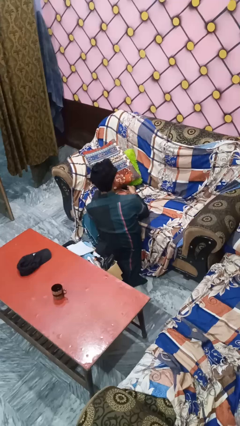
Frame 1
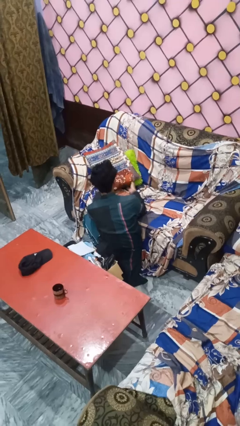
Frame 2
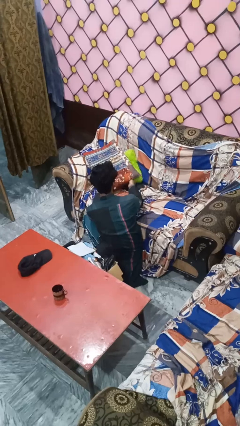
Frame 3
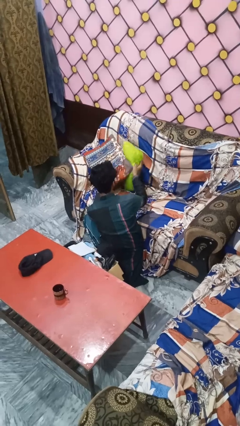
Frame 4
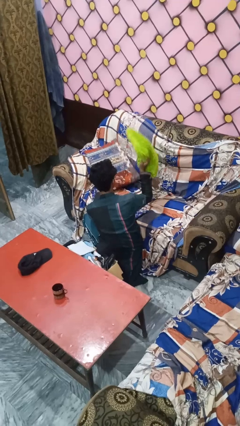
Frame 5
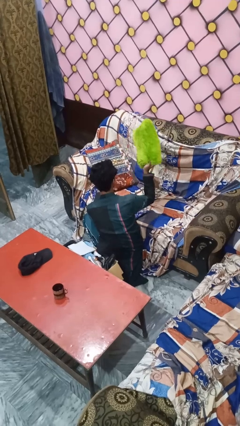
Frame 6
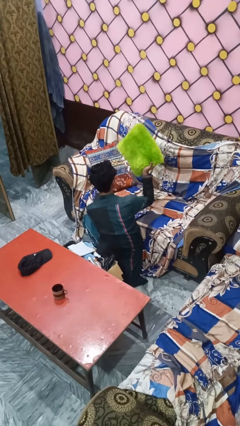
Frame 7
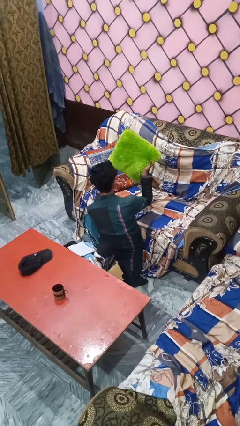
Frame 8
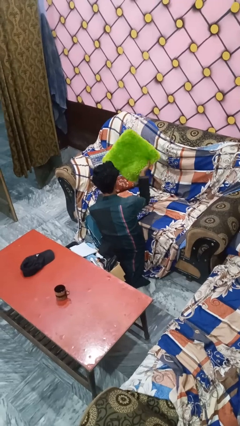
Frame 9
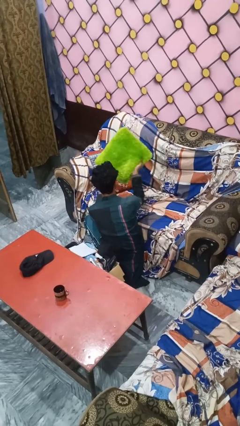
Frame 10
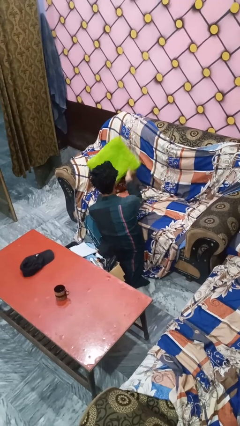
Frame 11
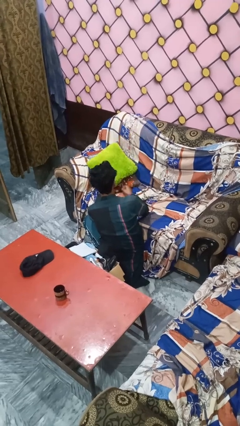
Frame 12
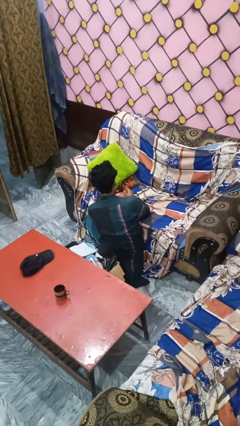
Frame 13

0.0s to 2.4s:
person searches in couch

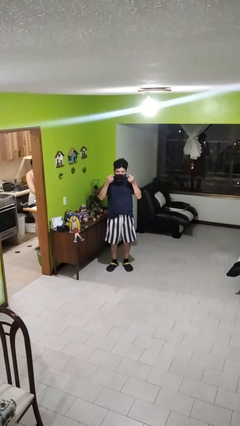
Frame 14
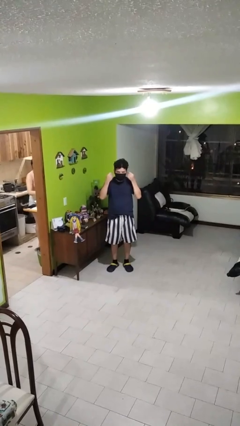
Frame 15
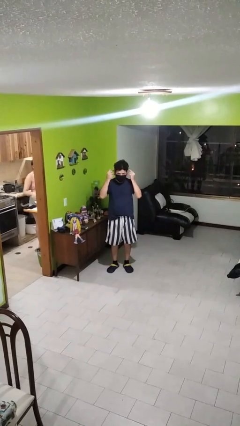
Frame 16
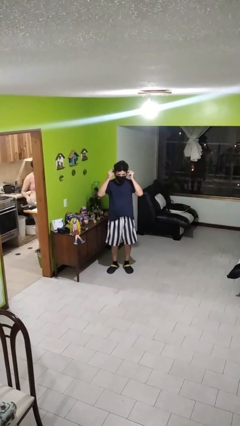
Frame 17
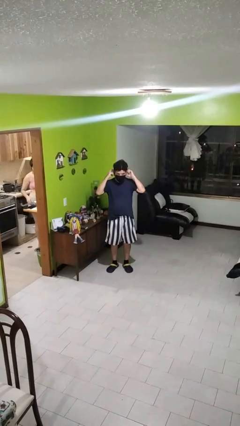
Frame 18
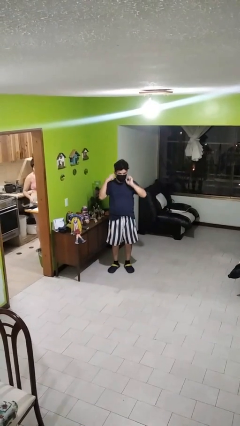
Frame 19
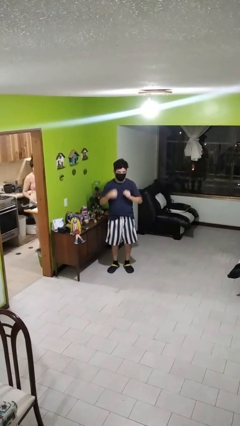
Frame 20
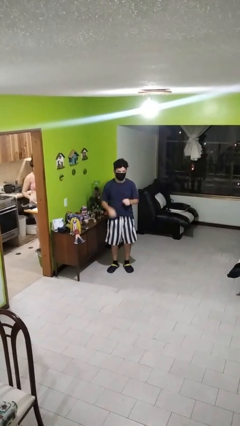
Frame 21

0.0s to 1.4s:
person puts on facemask

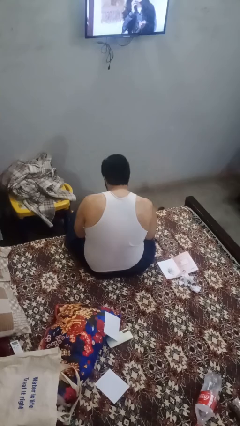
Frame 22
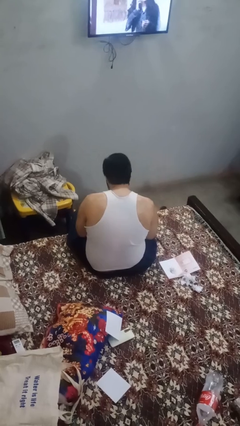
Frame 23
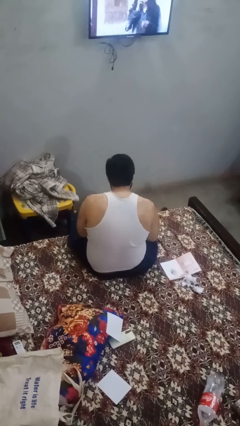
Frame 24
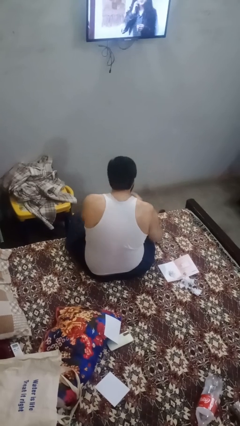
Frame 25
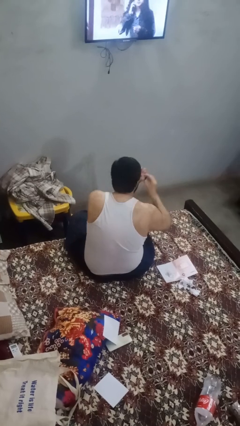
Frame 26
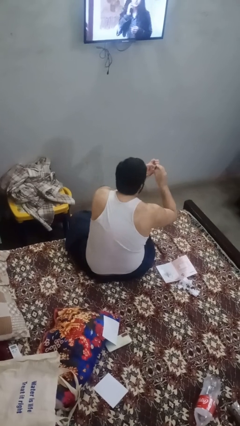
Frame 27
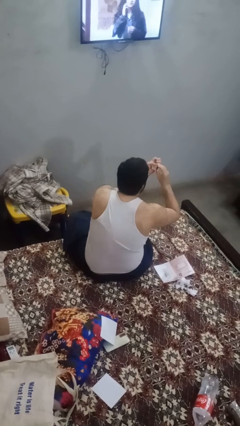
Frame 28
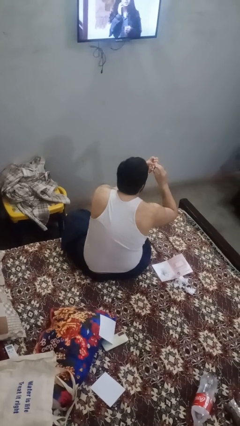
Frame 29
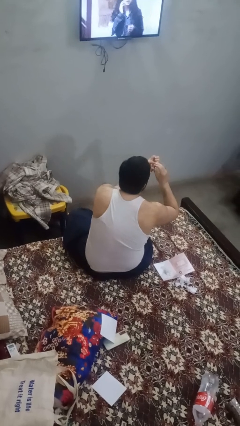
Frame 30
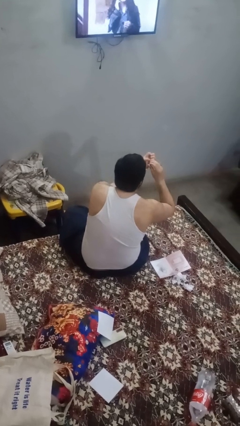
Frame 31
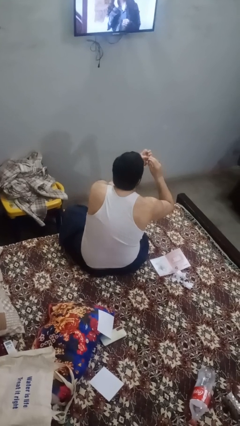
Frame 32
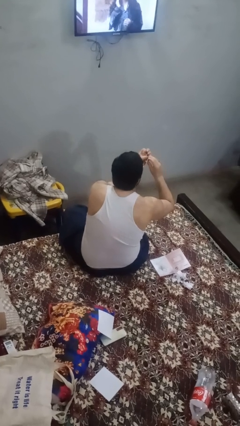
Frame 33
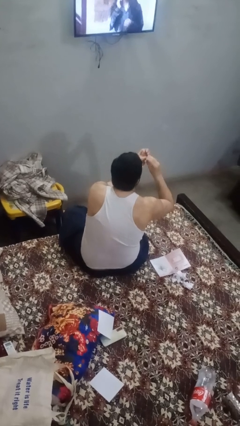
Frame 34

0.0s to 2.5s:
person clips fingernails

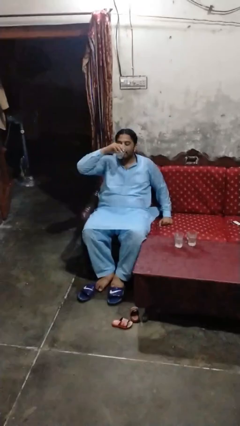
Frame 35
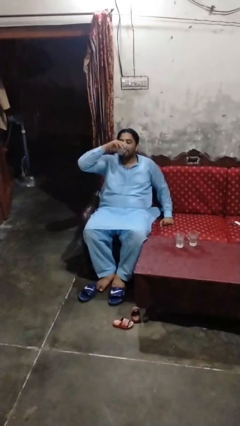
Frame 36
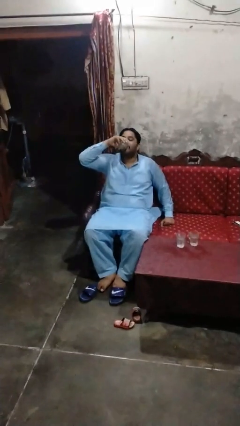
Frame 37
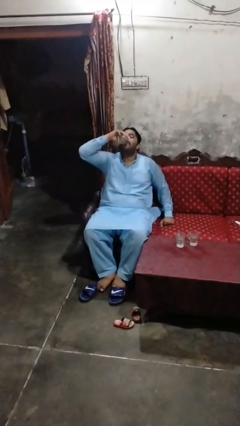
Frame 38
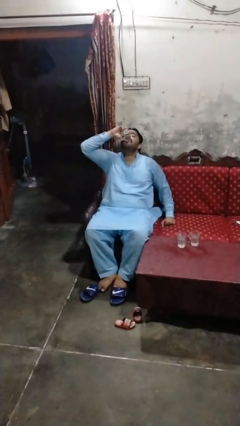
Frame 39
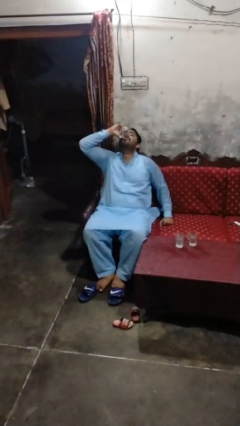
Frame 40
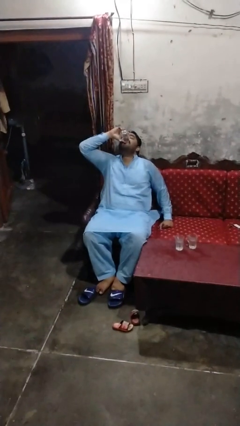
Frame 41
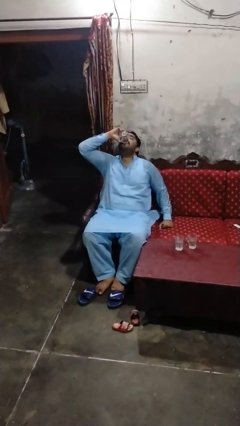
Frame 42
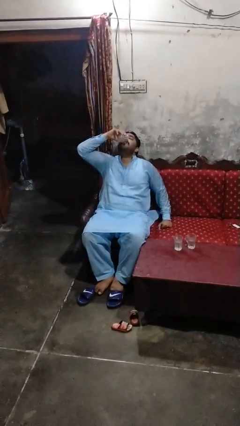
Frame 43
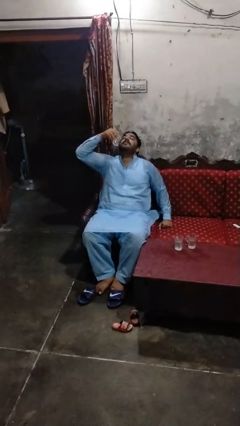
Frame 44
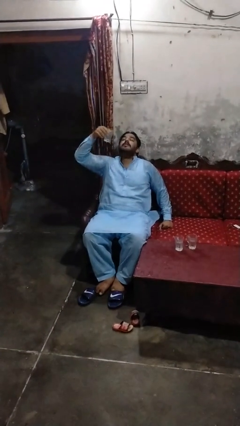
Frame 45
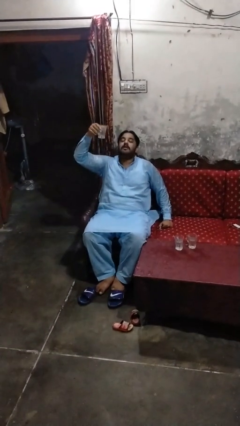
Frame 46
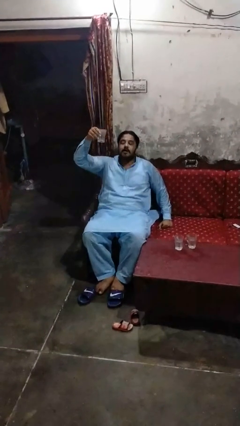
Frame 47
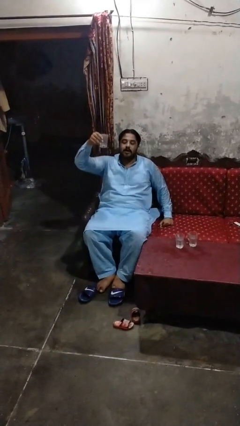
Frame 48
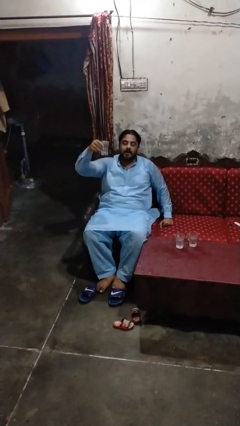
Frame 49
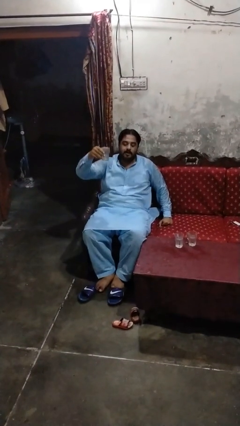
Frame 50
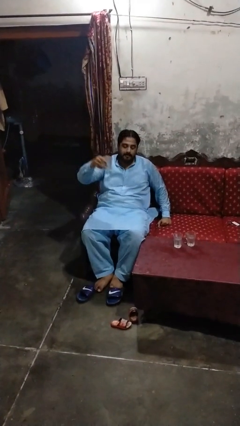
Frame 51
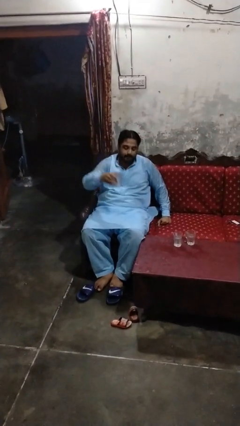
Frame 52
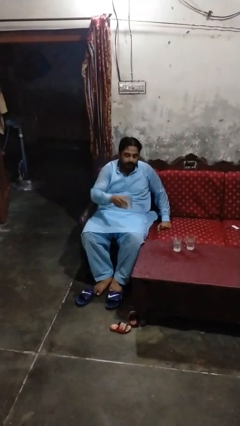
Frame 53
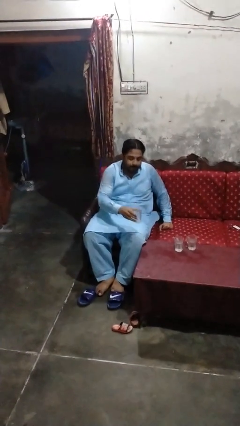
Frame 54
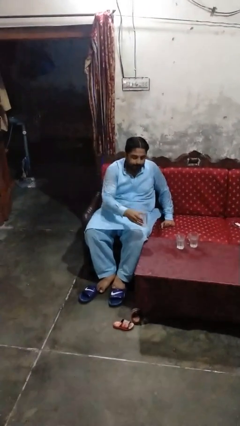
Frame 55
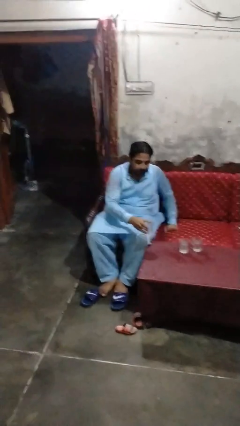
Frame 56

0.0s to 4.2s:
person drinks from shotglass

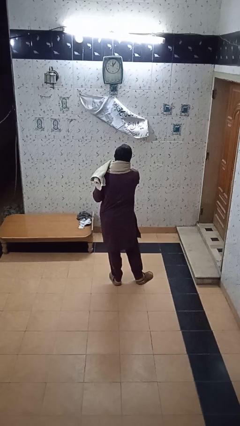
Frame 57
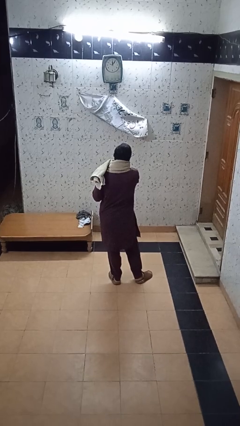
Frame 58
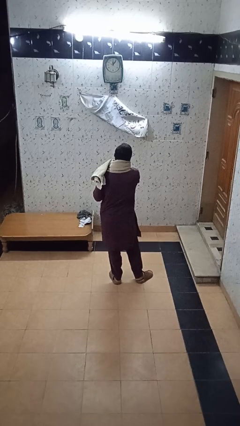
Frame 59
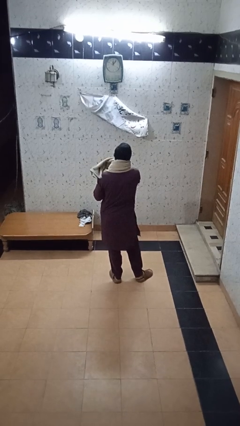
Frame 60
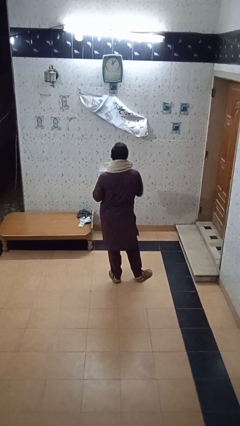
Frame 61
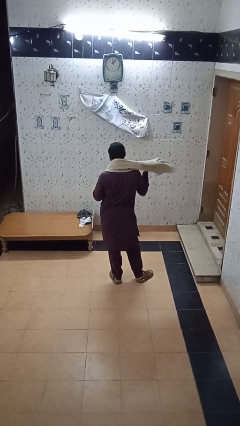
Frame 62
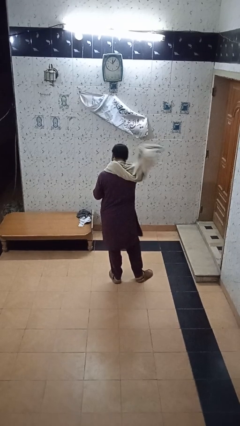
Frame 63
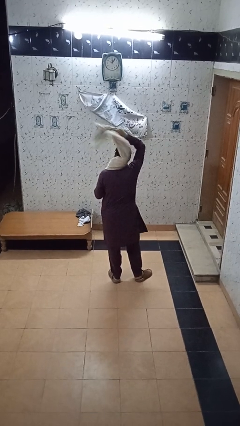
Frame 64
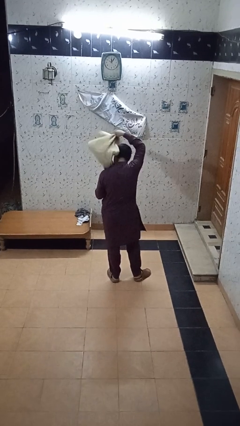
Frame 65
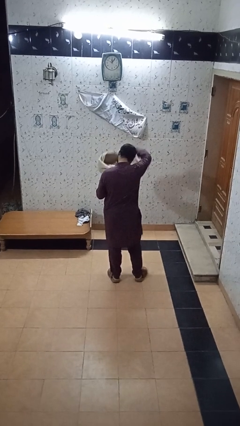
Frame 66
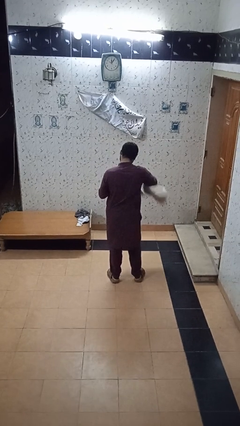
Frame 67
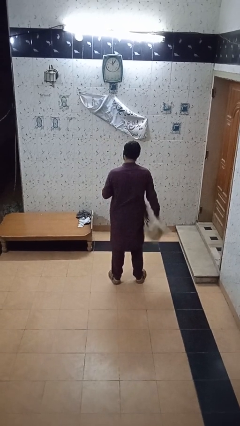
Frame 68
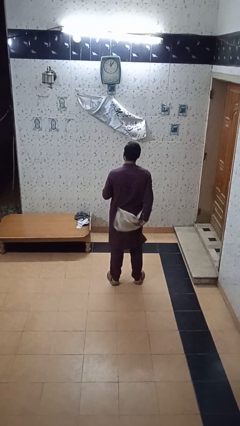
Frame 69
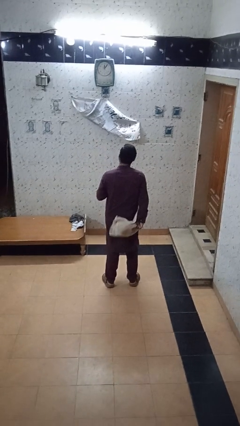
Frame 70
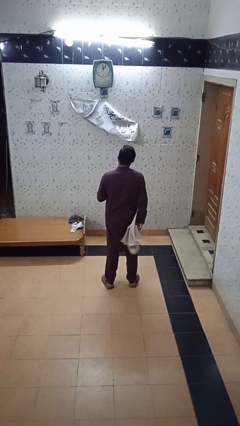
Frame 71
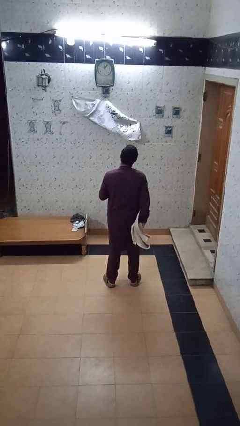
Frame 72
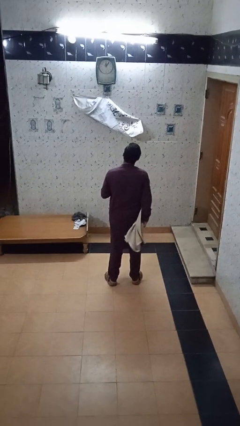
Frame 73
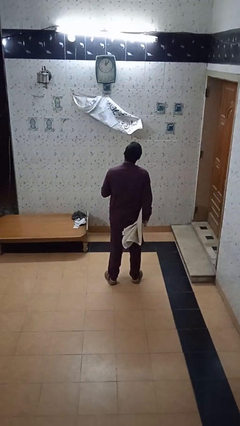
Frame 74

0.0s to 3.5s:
person takes off scarf

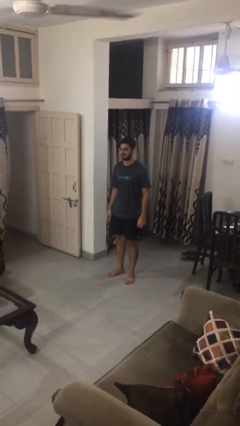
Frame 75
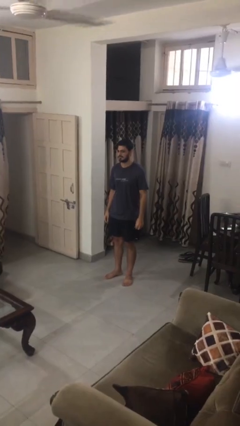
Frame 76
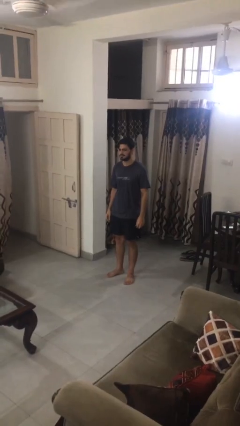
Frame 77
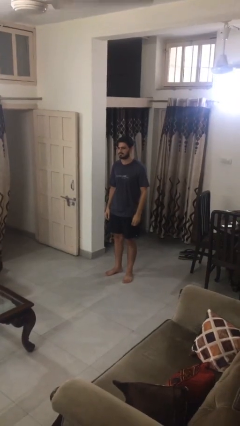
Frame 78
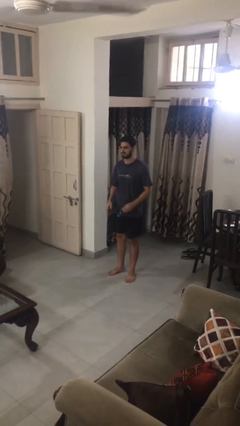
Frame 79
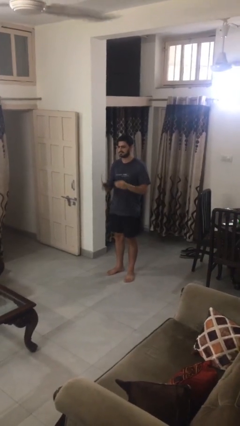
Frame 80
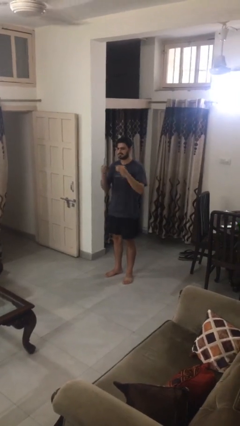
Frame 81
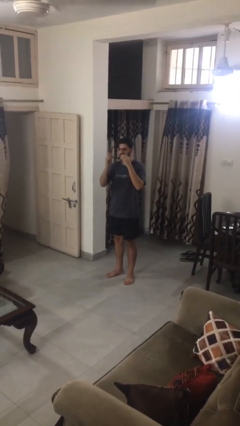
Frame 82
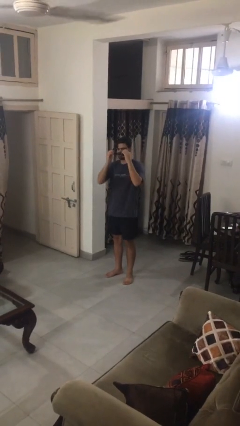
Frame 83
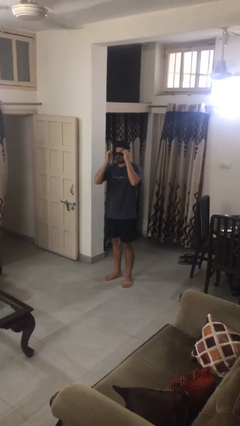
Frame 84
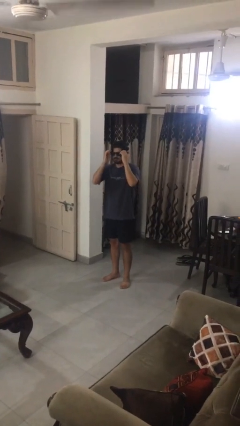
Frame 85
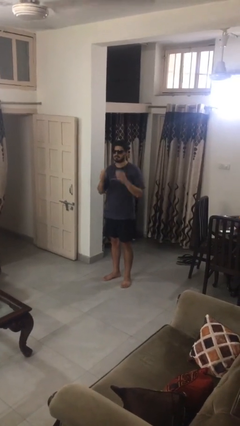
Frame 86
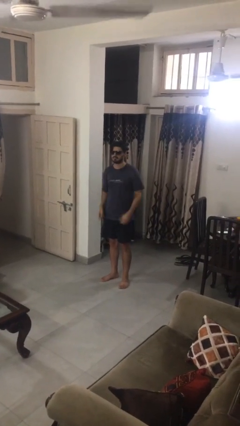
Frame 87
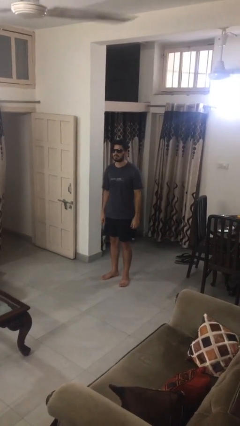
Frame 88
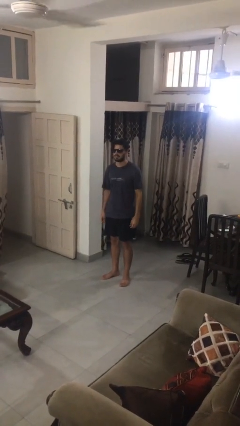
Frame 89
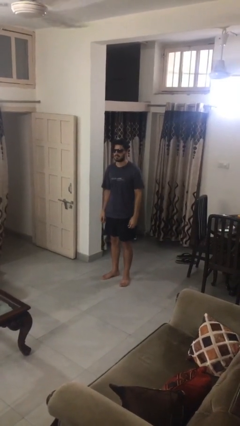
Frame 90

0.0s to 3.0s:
person puts on sunglasses

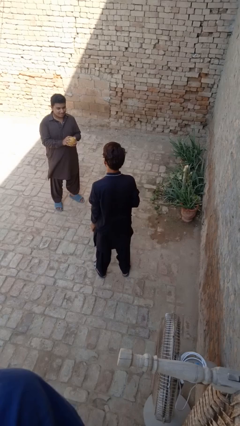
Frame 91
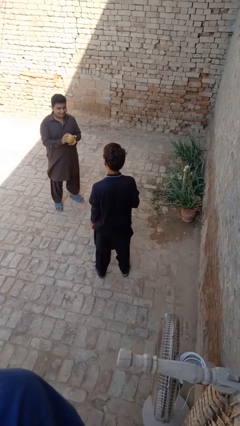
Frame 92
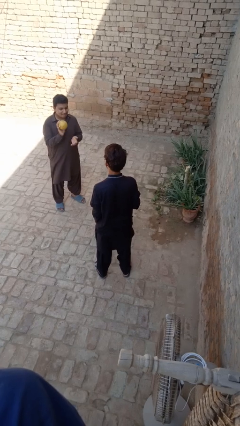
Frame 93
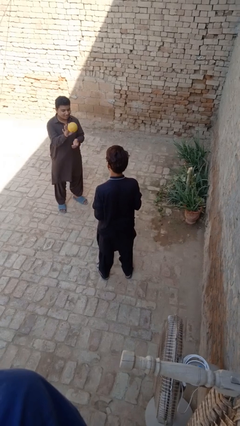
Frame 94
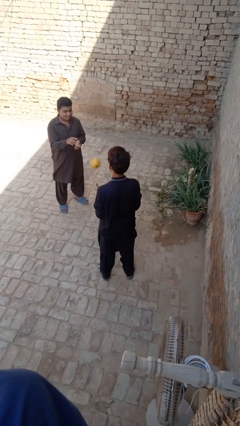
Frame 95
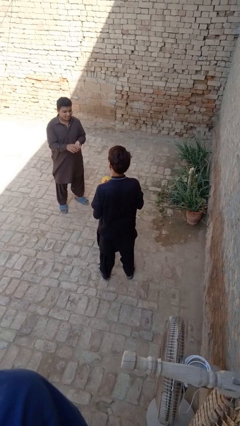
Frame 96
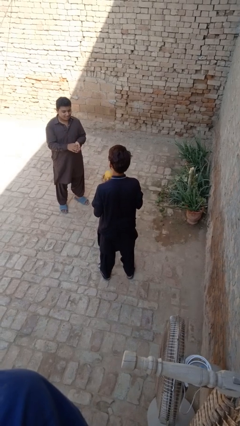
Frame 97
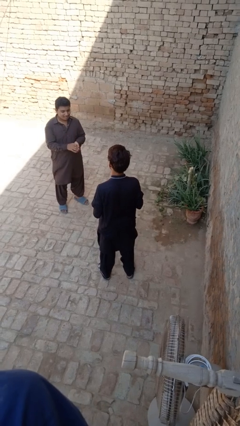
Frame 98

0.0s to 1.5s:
person catches object from person
